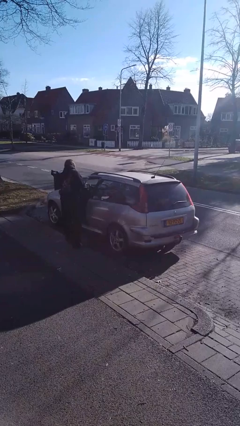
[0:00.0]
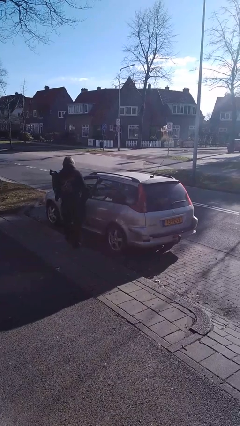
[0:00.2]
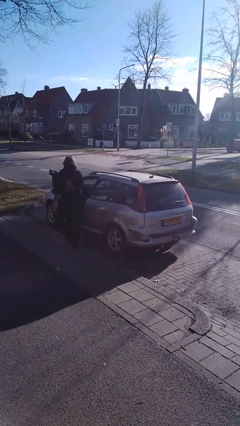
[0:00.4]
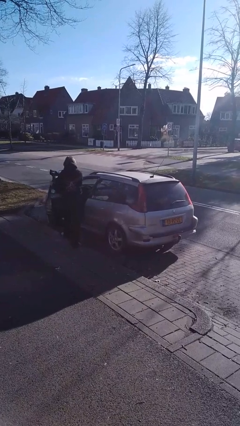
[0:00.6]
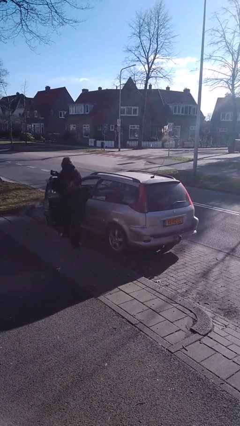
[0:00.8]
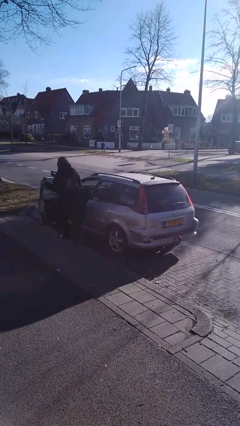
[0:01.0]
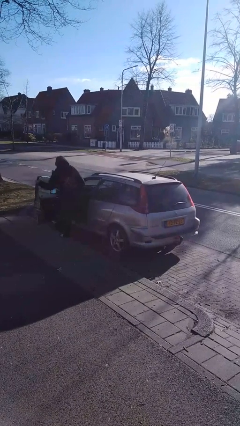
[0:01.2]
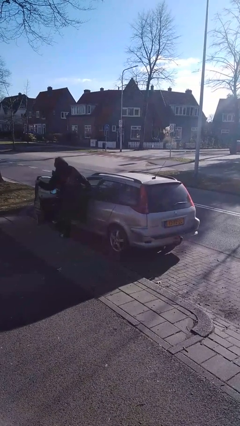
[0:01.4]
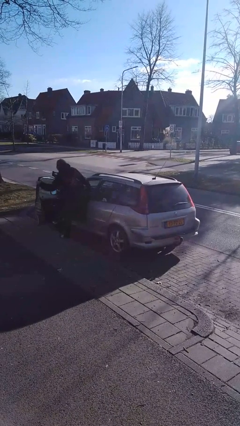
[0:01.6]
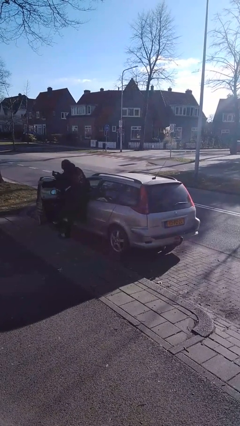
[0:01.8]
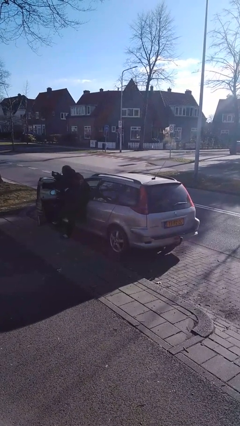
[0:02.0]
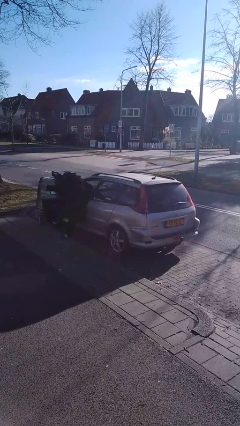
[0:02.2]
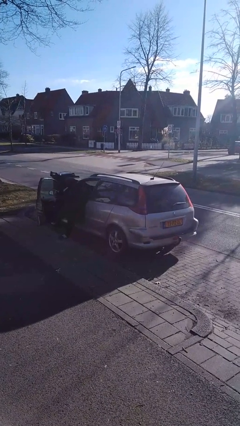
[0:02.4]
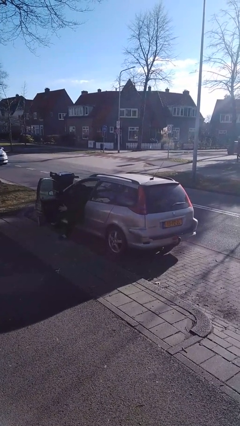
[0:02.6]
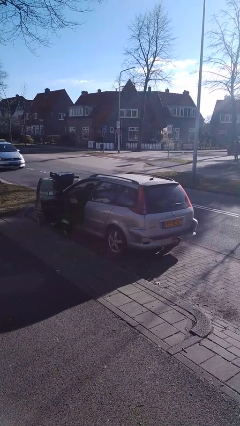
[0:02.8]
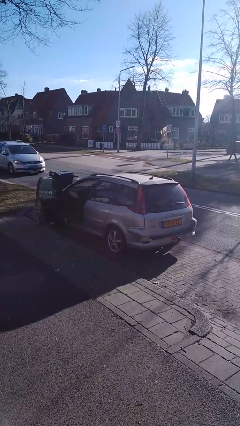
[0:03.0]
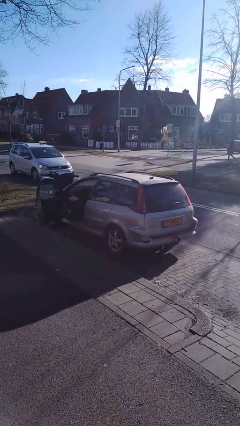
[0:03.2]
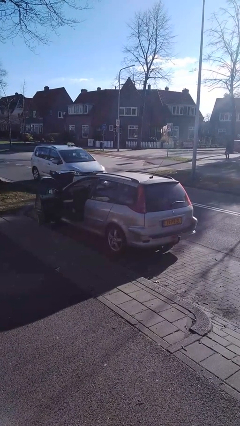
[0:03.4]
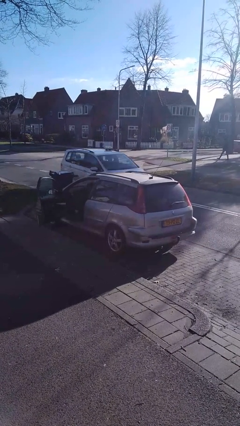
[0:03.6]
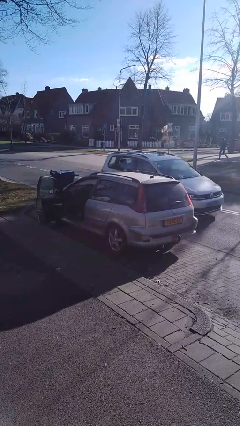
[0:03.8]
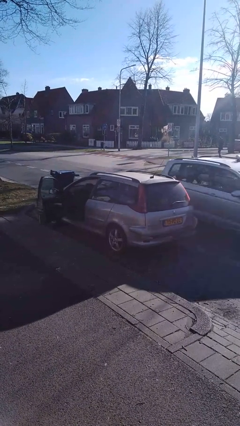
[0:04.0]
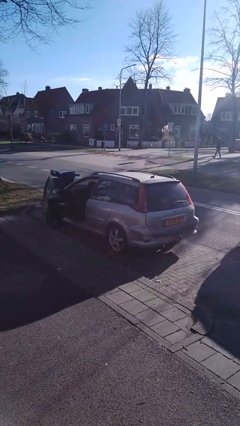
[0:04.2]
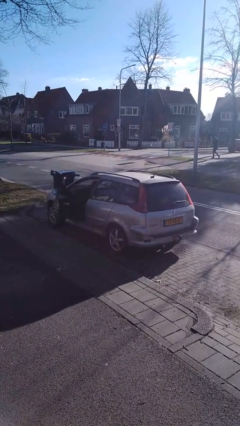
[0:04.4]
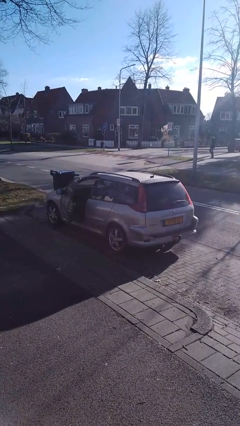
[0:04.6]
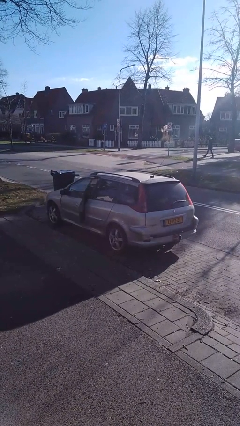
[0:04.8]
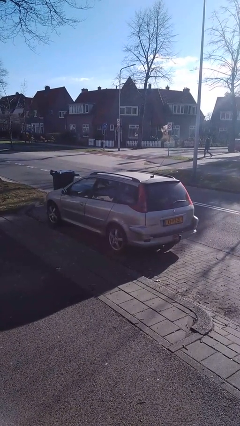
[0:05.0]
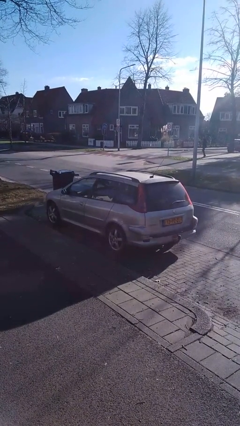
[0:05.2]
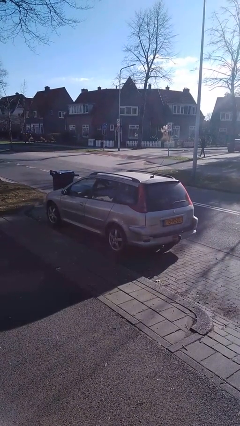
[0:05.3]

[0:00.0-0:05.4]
car picks up person

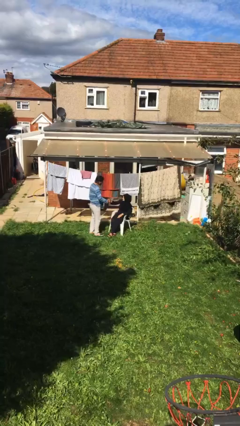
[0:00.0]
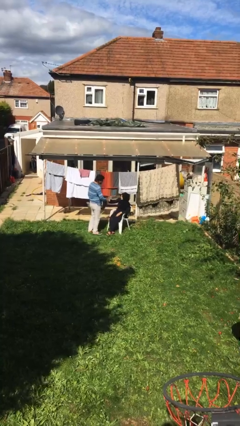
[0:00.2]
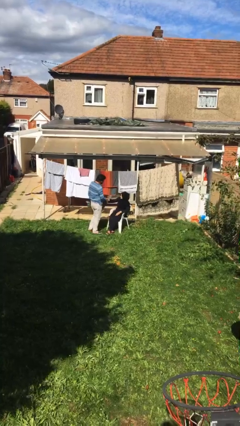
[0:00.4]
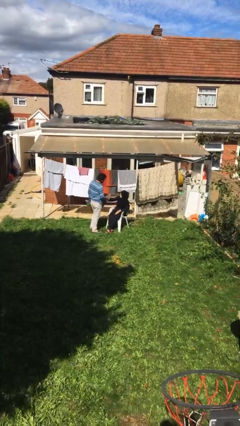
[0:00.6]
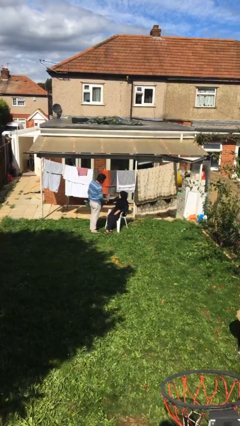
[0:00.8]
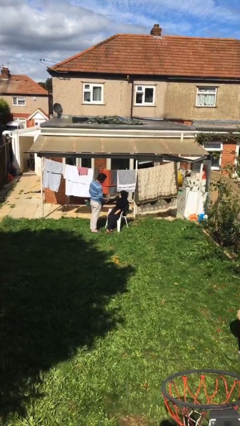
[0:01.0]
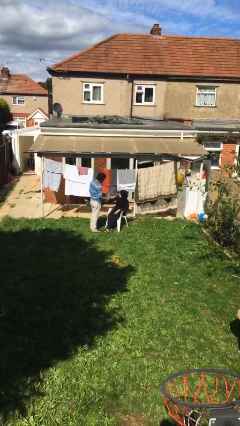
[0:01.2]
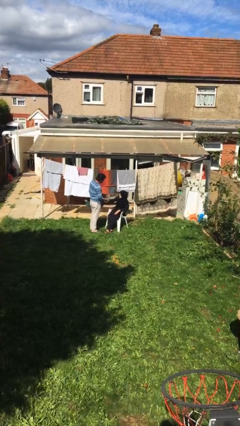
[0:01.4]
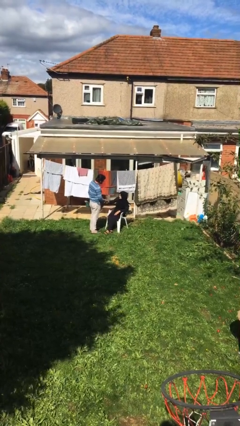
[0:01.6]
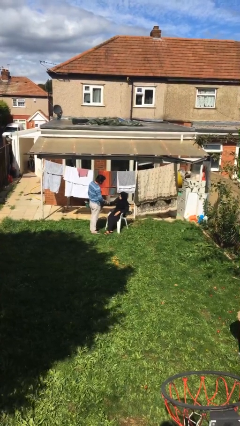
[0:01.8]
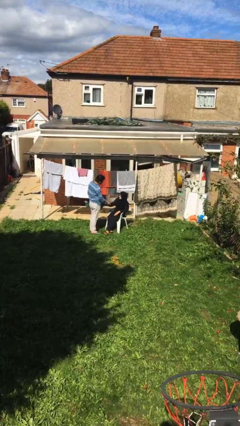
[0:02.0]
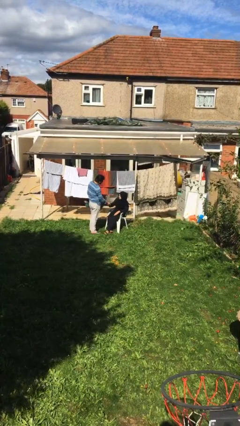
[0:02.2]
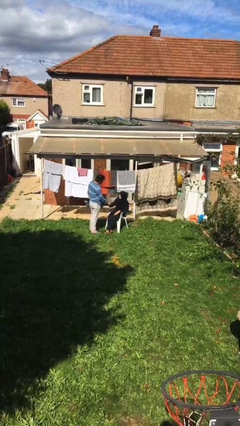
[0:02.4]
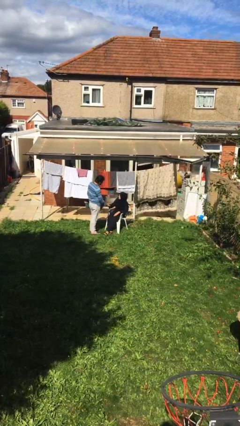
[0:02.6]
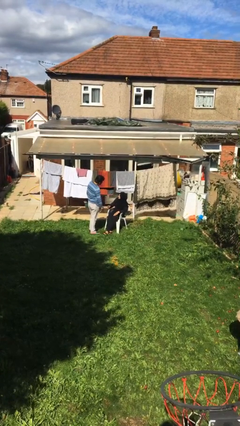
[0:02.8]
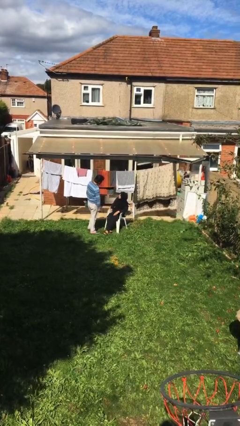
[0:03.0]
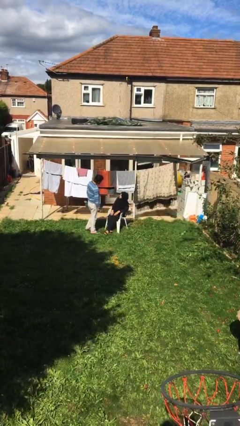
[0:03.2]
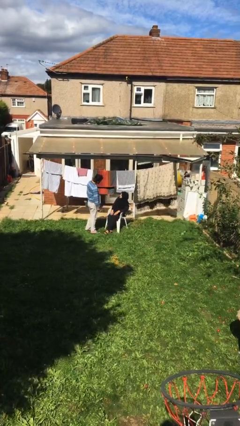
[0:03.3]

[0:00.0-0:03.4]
person shakes hand

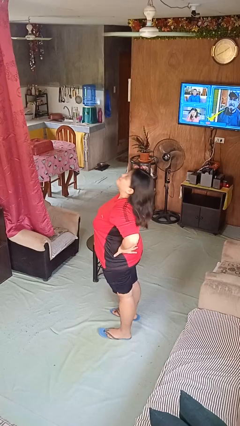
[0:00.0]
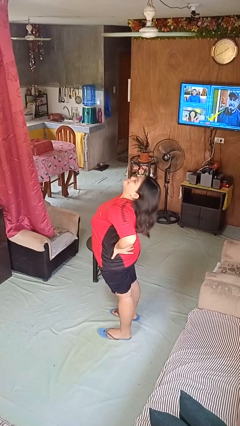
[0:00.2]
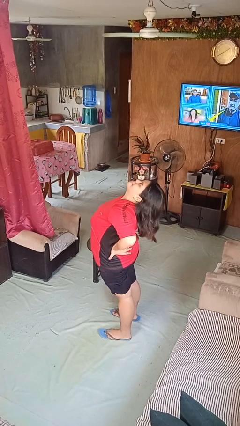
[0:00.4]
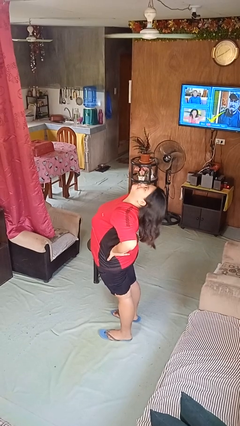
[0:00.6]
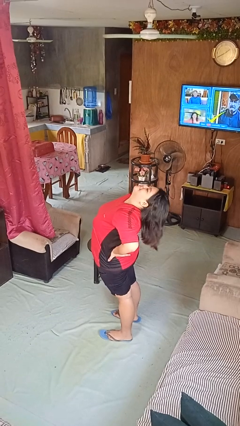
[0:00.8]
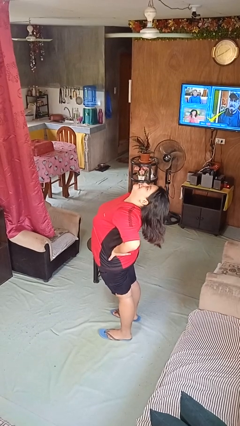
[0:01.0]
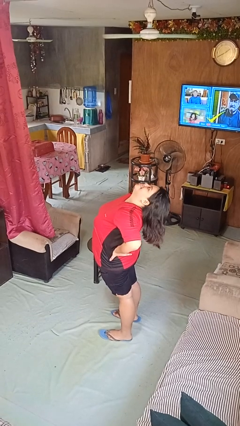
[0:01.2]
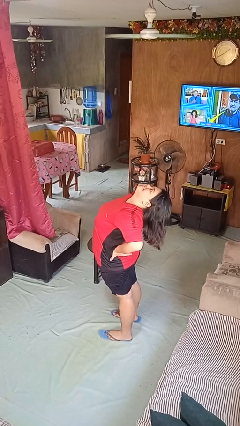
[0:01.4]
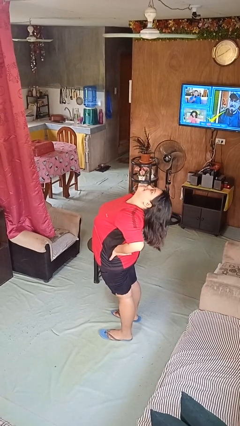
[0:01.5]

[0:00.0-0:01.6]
person stretches back

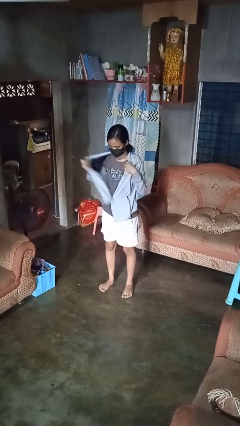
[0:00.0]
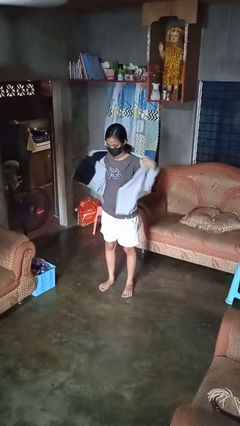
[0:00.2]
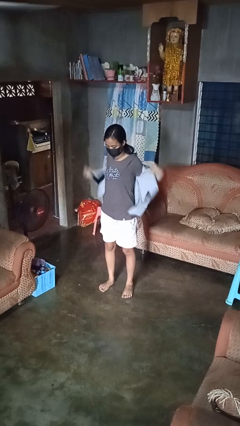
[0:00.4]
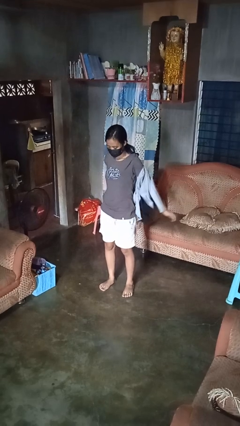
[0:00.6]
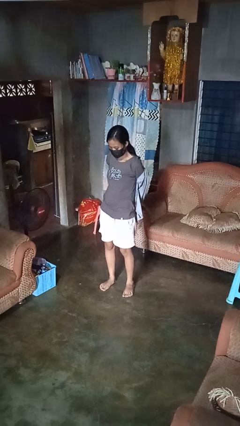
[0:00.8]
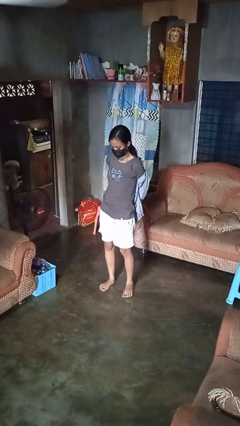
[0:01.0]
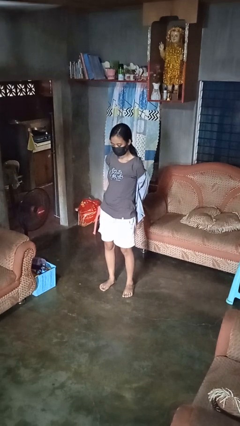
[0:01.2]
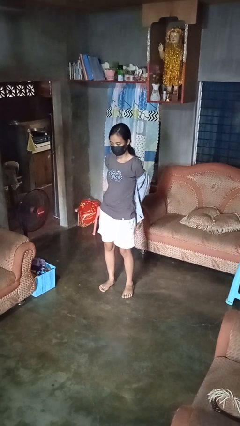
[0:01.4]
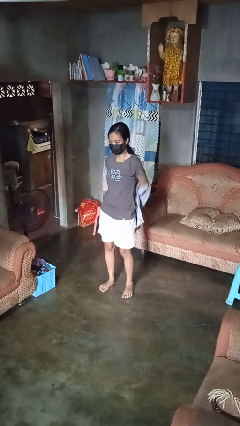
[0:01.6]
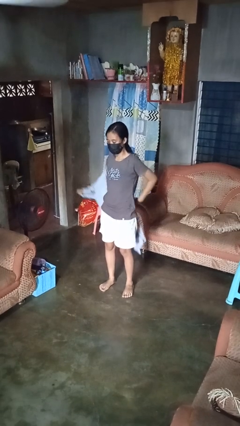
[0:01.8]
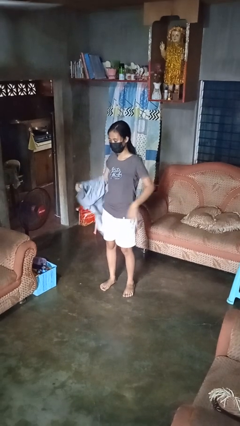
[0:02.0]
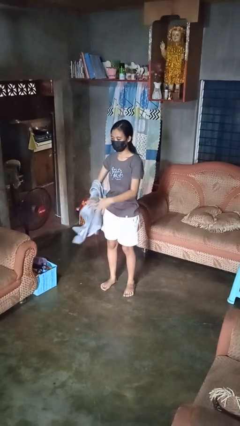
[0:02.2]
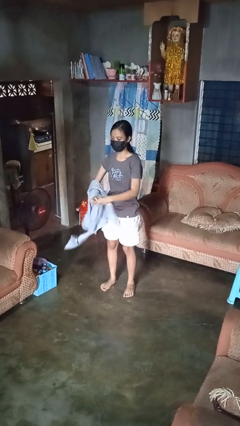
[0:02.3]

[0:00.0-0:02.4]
person takes off jacket

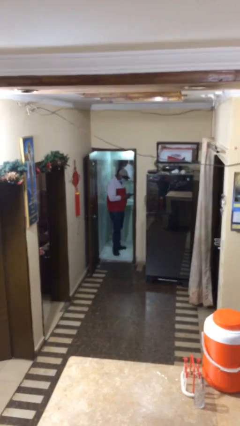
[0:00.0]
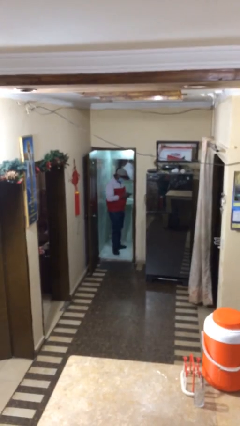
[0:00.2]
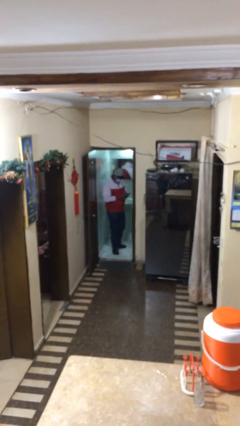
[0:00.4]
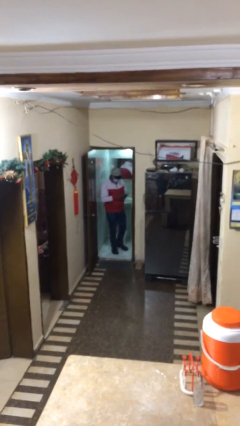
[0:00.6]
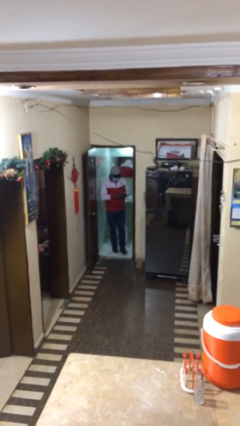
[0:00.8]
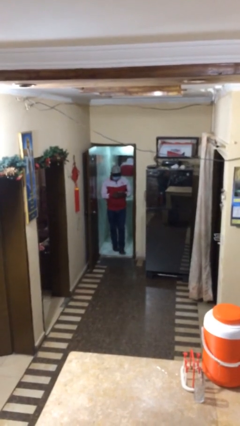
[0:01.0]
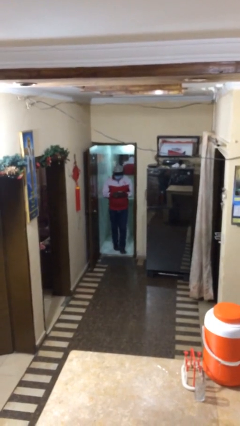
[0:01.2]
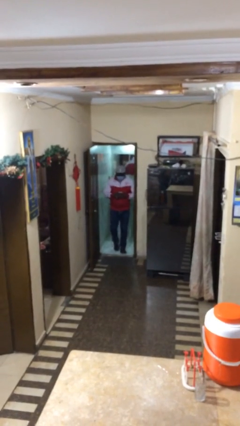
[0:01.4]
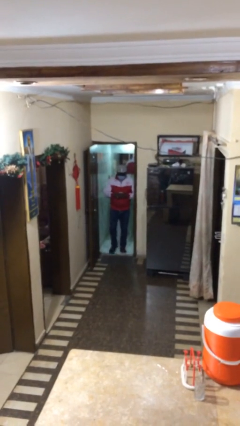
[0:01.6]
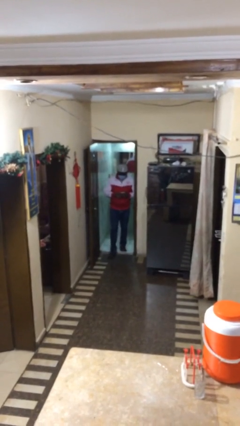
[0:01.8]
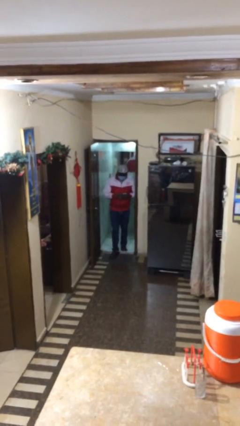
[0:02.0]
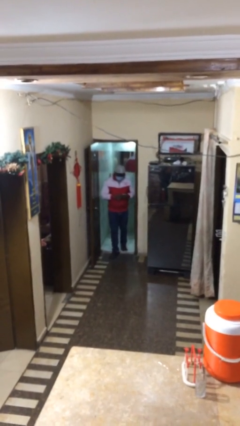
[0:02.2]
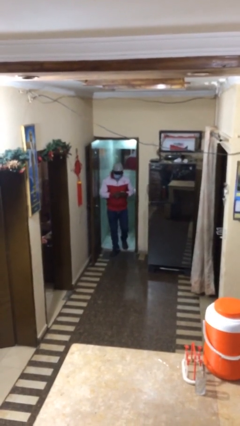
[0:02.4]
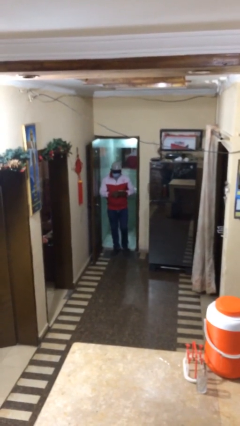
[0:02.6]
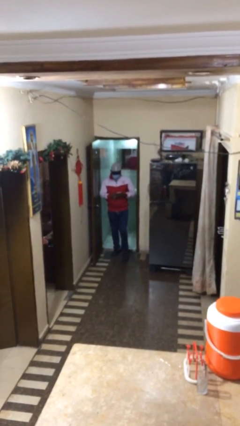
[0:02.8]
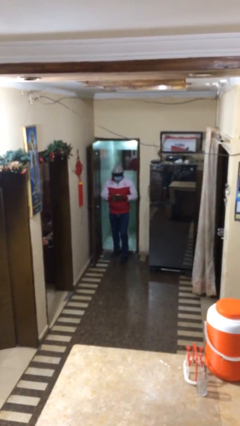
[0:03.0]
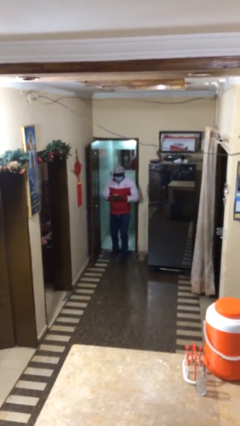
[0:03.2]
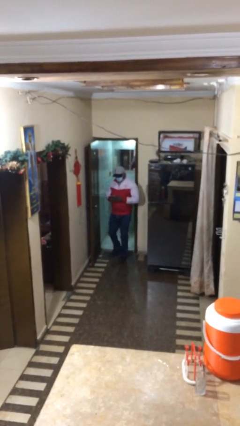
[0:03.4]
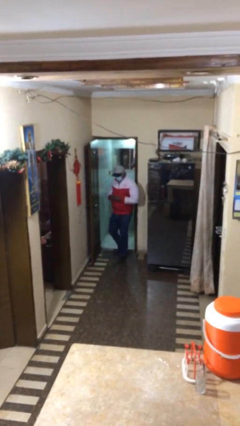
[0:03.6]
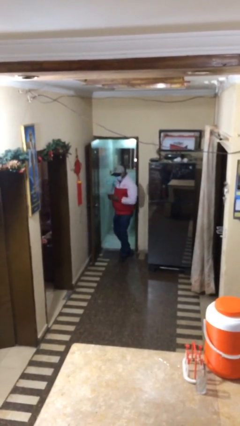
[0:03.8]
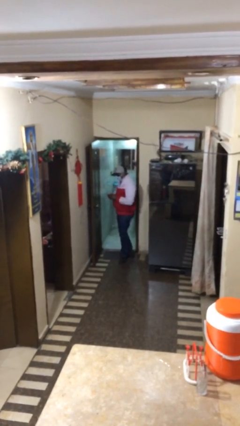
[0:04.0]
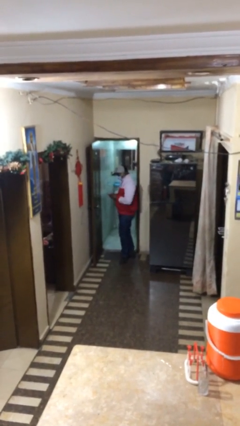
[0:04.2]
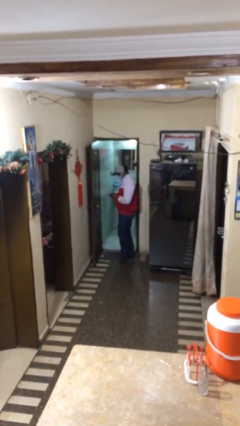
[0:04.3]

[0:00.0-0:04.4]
person enters scene through structure

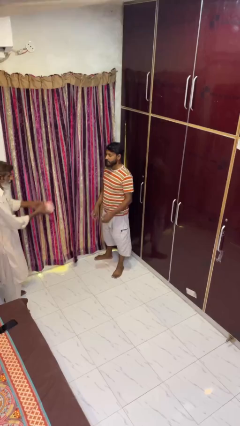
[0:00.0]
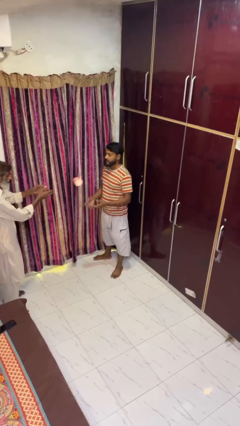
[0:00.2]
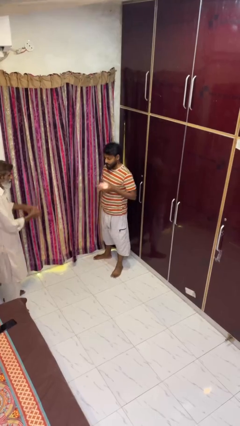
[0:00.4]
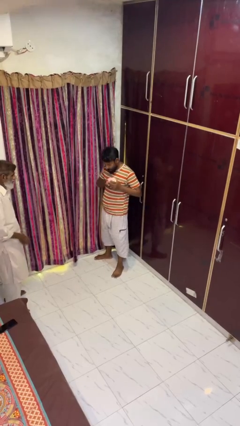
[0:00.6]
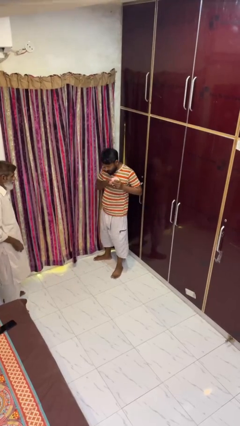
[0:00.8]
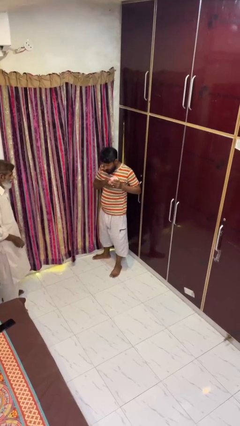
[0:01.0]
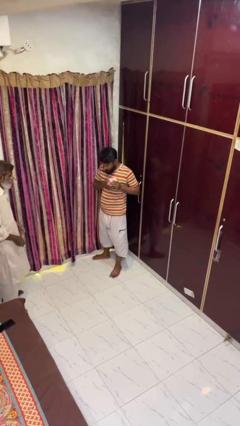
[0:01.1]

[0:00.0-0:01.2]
person catches object from person
